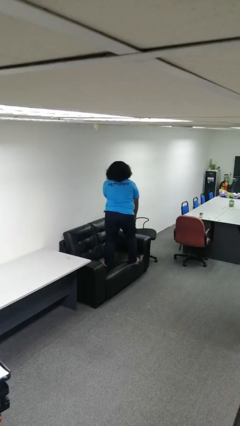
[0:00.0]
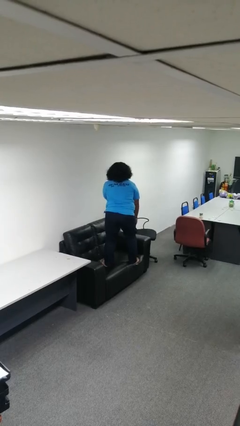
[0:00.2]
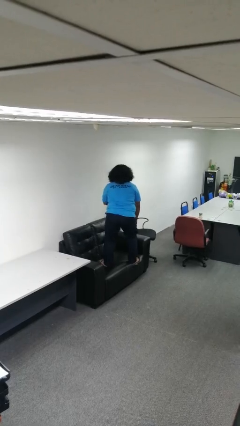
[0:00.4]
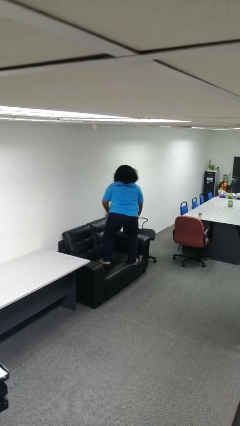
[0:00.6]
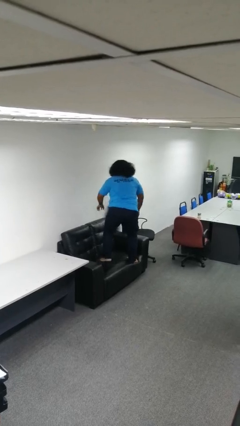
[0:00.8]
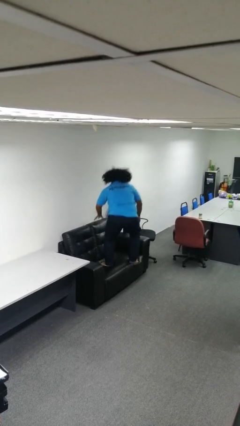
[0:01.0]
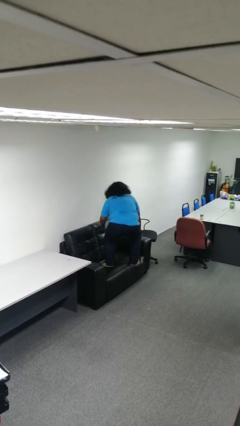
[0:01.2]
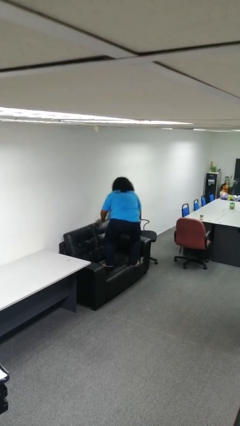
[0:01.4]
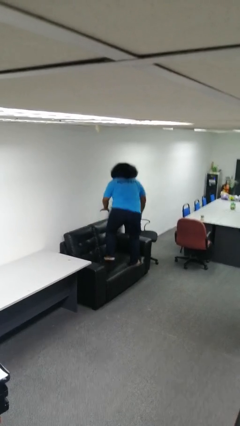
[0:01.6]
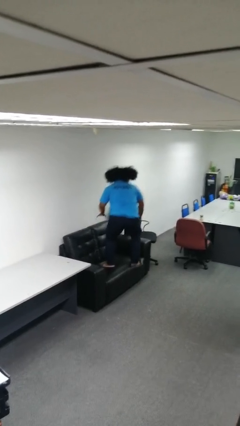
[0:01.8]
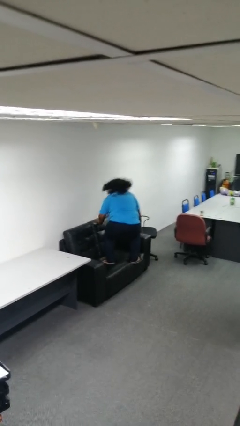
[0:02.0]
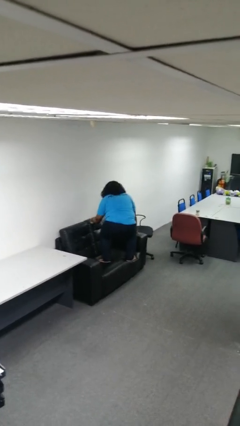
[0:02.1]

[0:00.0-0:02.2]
person jumps on couch

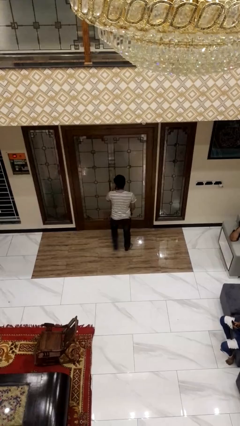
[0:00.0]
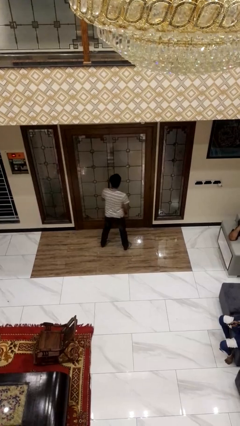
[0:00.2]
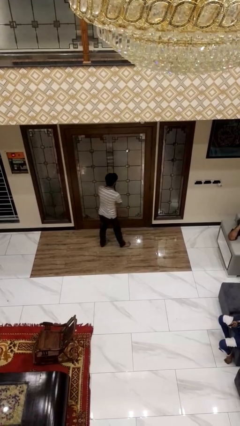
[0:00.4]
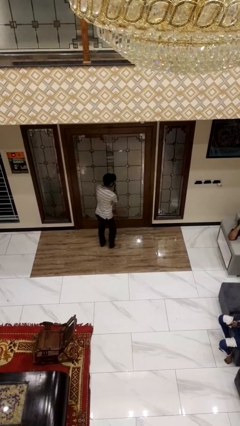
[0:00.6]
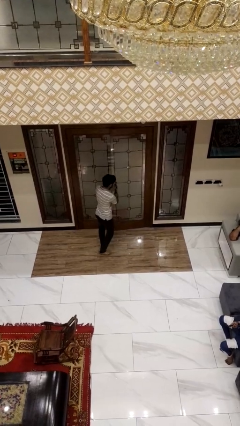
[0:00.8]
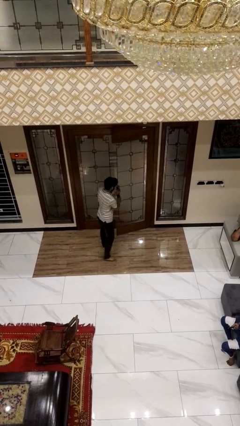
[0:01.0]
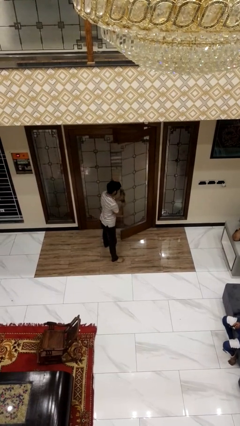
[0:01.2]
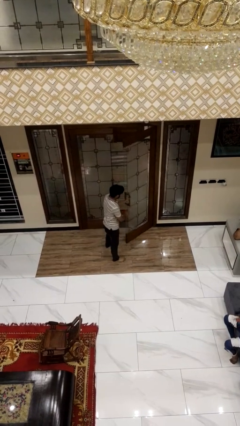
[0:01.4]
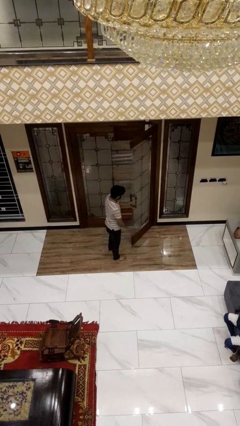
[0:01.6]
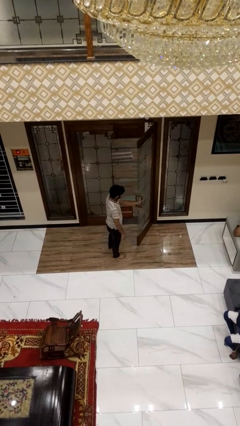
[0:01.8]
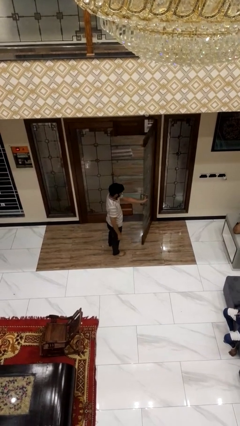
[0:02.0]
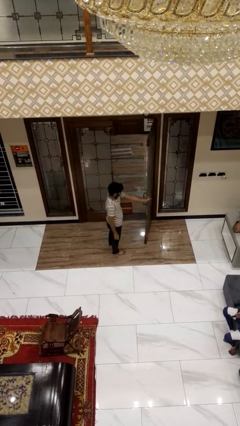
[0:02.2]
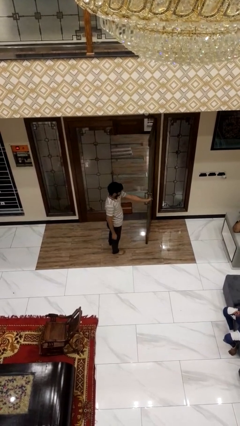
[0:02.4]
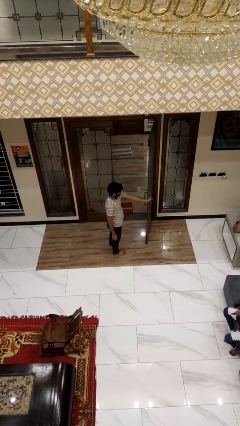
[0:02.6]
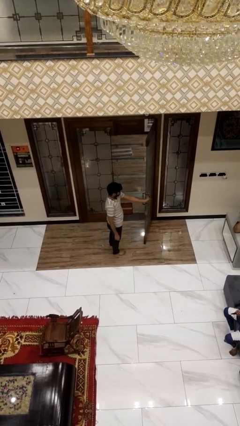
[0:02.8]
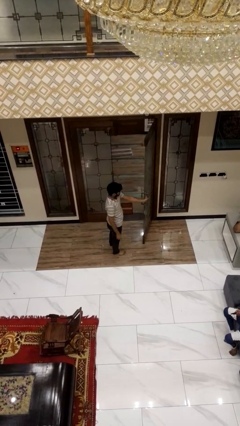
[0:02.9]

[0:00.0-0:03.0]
person opens facility door

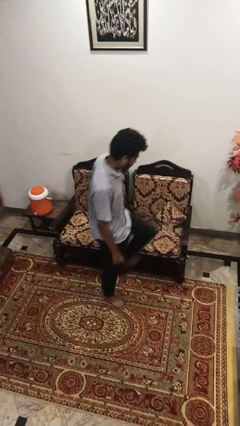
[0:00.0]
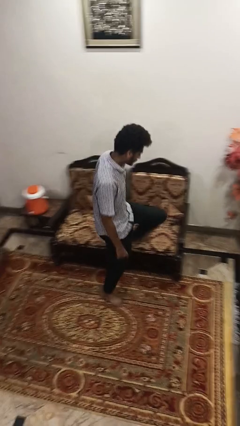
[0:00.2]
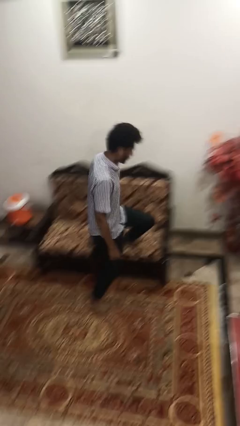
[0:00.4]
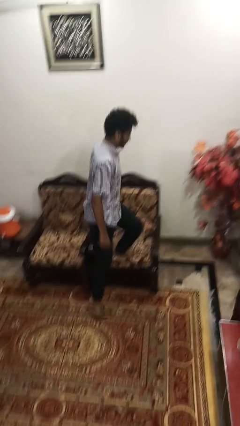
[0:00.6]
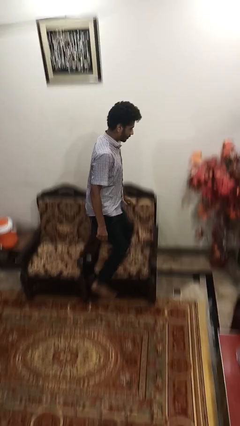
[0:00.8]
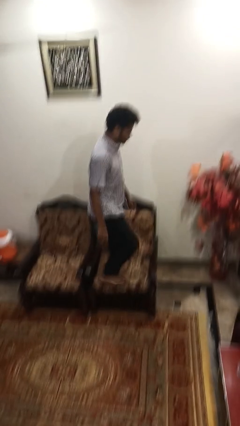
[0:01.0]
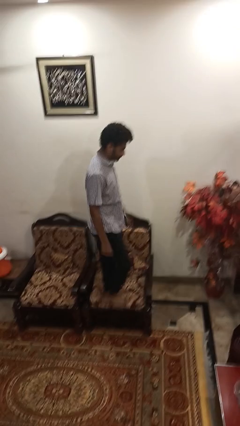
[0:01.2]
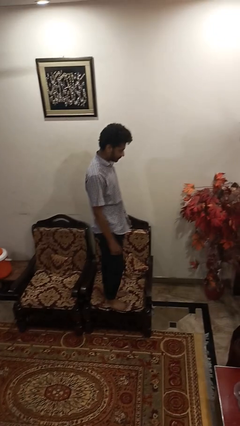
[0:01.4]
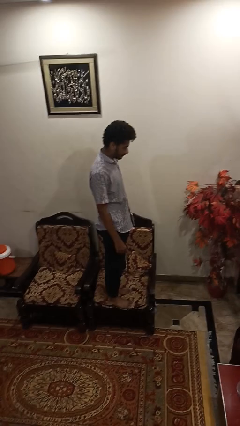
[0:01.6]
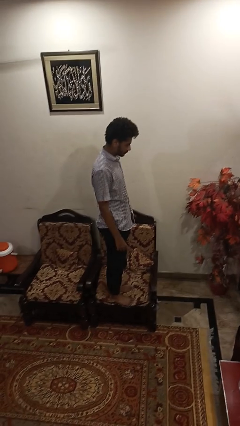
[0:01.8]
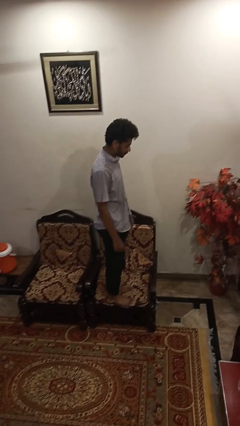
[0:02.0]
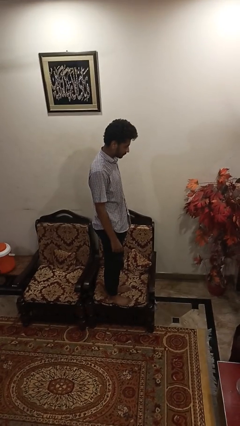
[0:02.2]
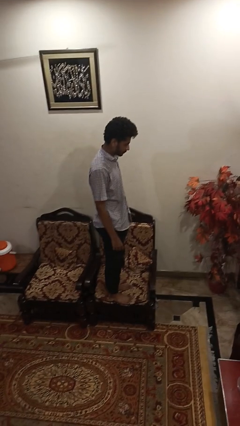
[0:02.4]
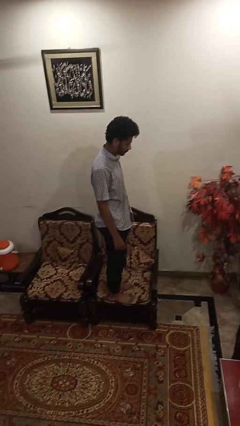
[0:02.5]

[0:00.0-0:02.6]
person climbs on couch

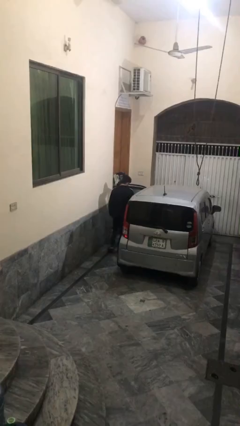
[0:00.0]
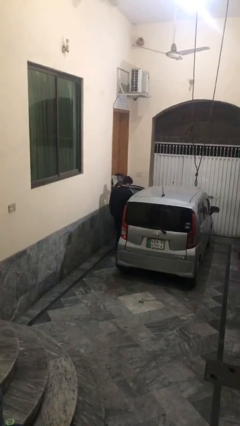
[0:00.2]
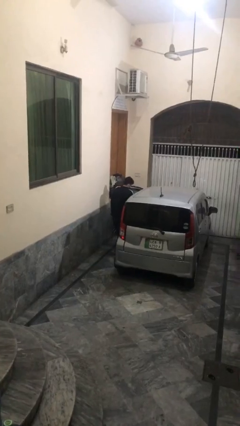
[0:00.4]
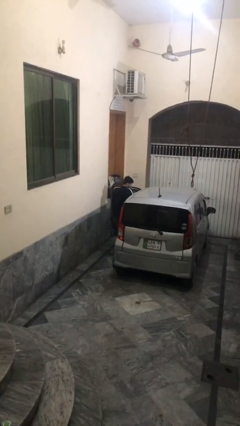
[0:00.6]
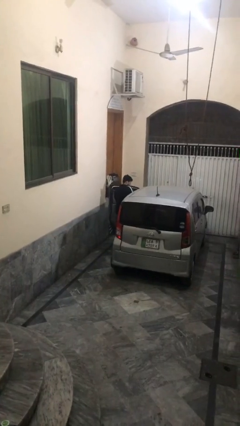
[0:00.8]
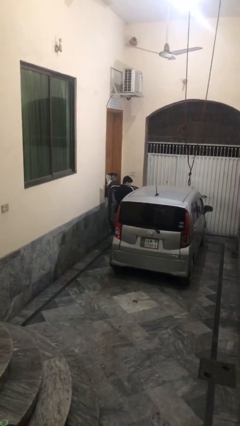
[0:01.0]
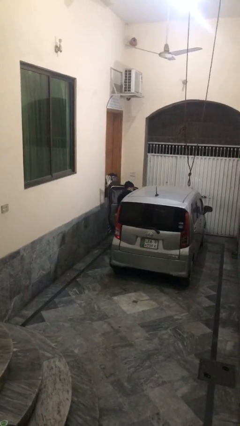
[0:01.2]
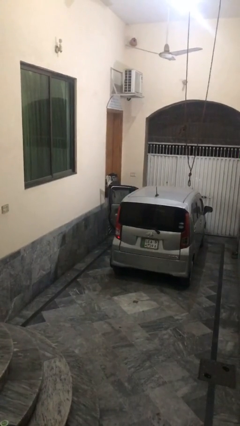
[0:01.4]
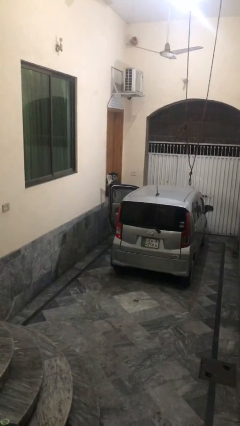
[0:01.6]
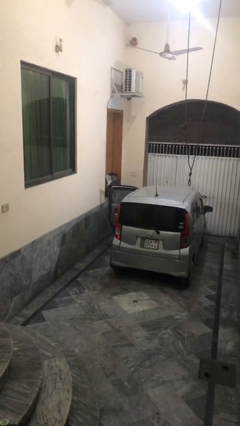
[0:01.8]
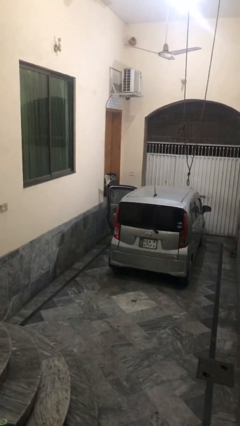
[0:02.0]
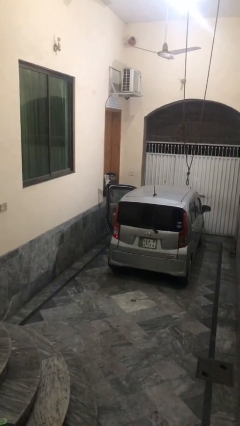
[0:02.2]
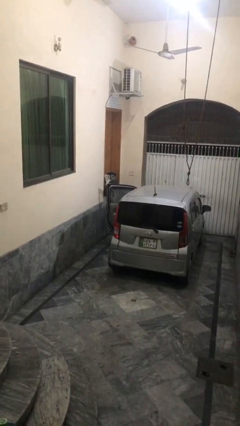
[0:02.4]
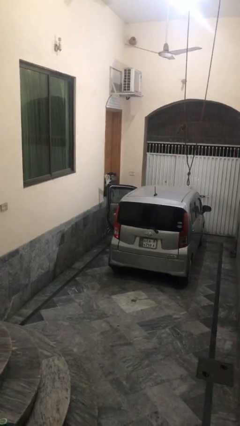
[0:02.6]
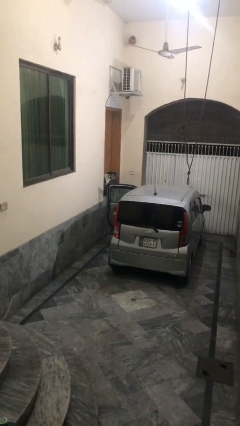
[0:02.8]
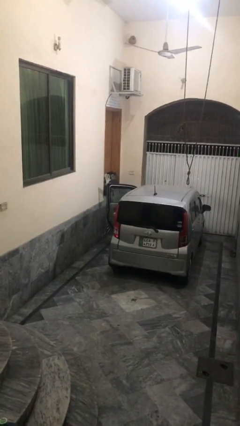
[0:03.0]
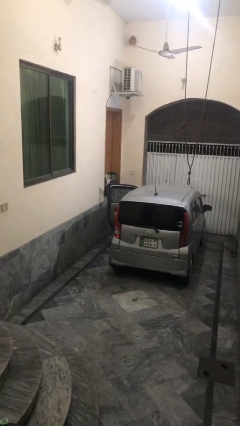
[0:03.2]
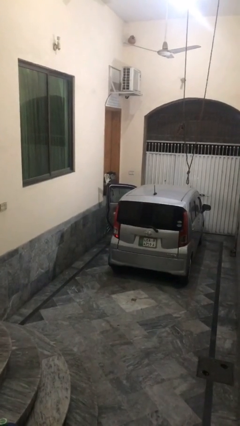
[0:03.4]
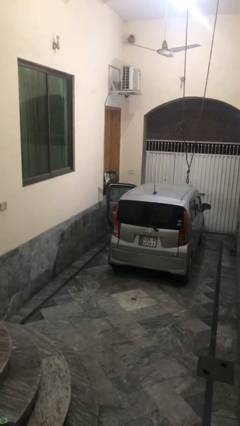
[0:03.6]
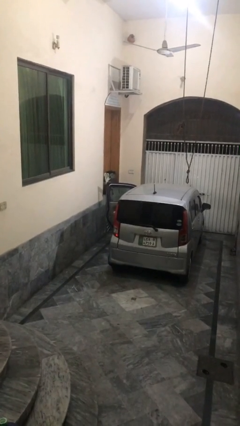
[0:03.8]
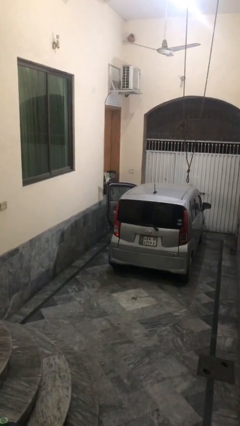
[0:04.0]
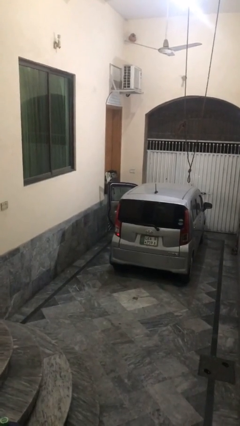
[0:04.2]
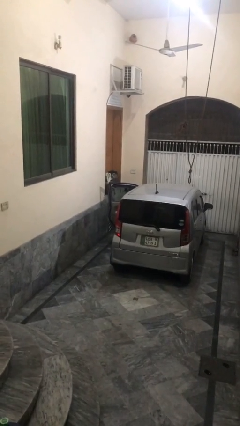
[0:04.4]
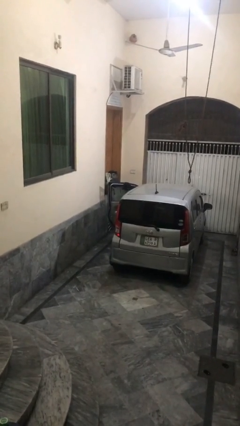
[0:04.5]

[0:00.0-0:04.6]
person enters car

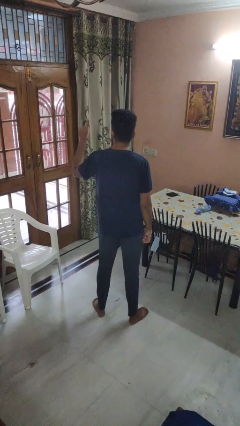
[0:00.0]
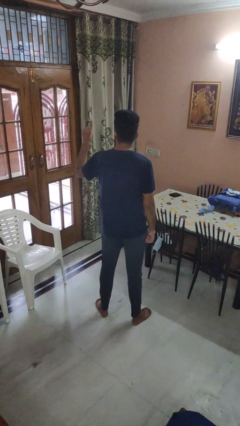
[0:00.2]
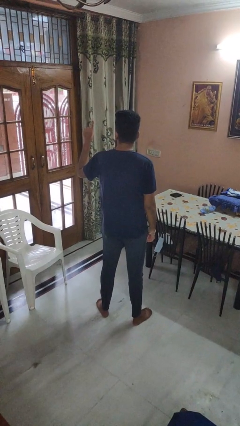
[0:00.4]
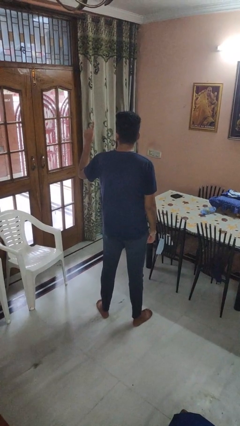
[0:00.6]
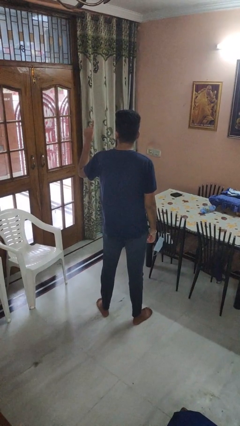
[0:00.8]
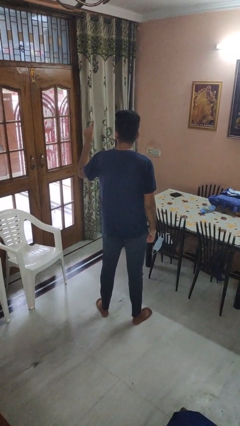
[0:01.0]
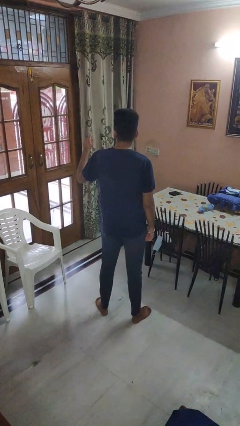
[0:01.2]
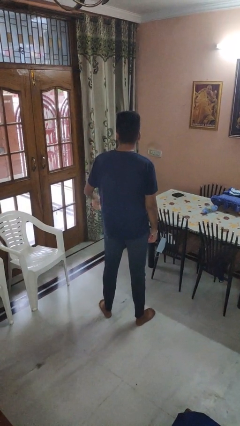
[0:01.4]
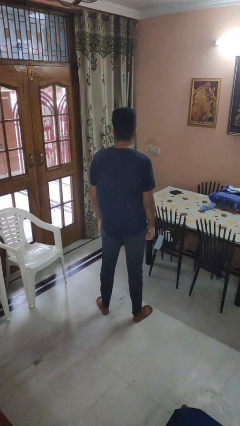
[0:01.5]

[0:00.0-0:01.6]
person gestures number one

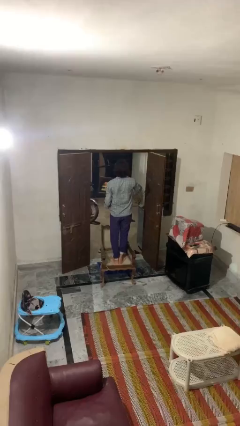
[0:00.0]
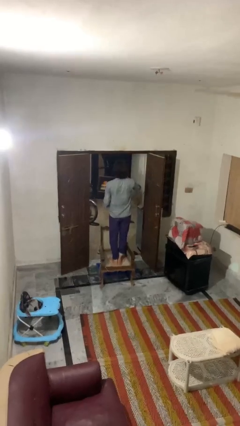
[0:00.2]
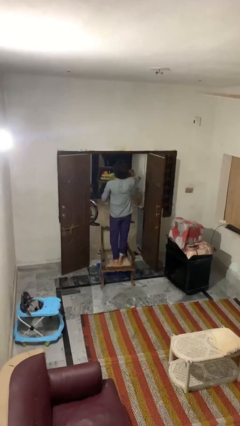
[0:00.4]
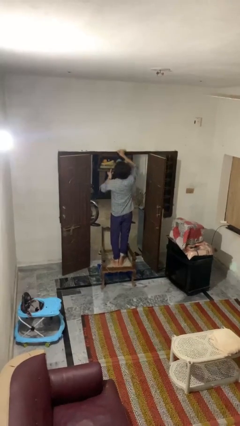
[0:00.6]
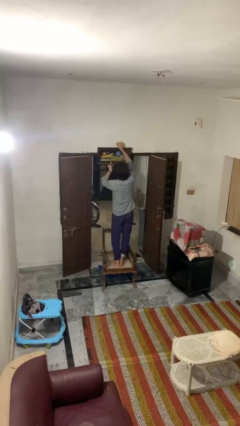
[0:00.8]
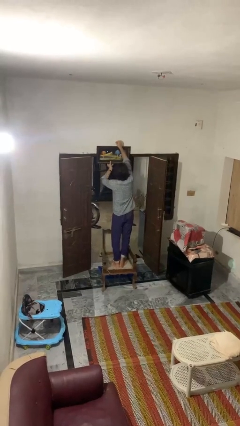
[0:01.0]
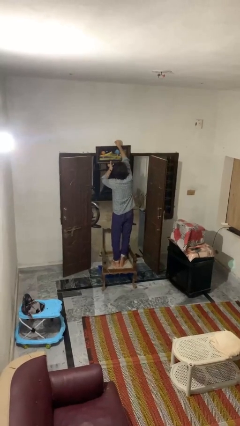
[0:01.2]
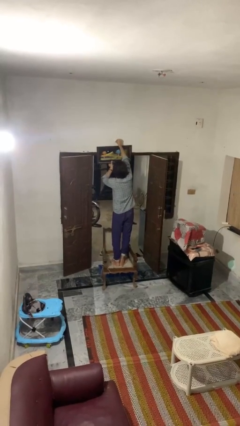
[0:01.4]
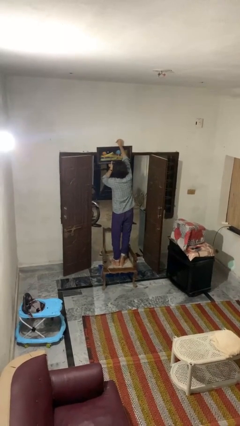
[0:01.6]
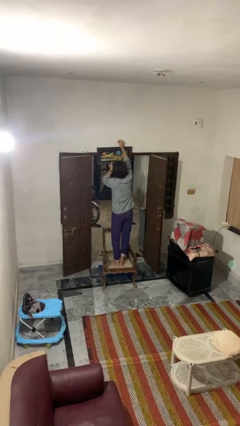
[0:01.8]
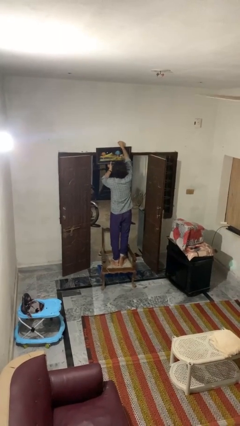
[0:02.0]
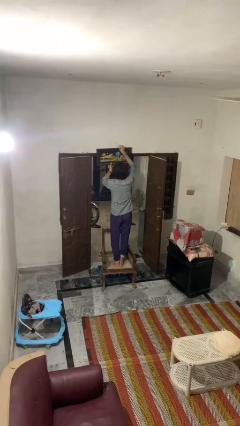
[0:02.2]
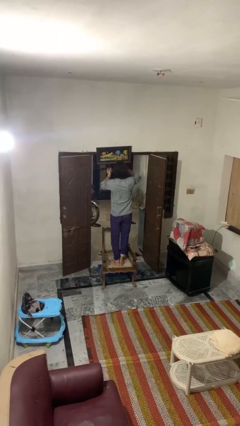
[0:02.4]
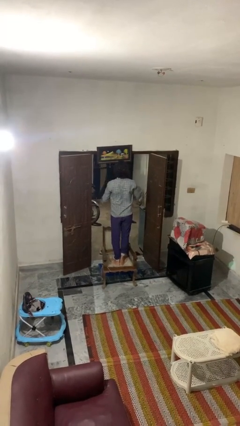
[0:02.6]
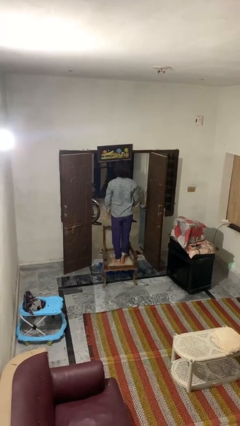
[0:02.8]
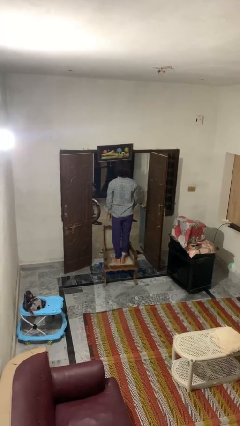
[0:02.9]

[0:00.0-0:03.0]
person puts up picture frame

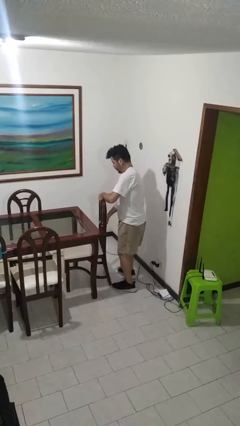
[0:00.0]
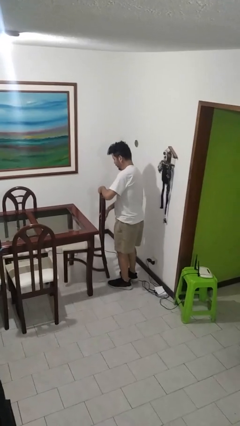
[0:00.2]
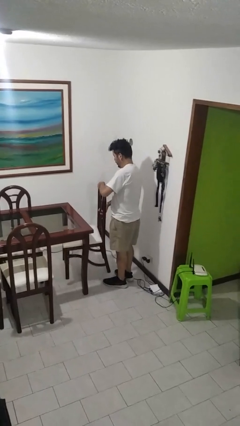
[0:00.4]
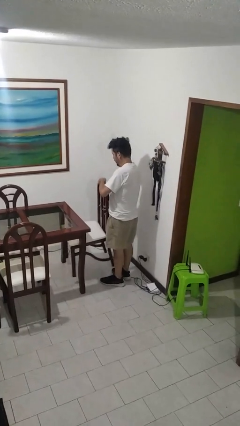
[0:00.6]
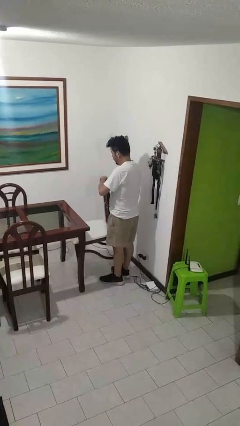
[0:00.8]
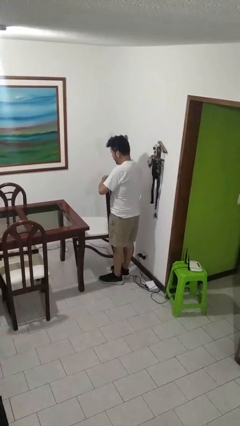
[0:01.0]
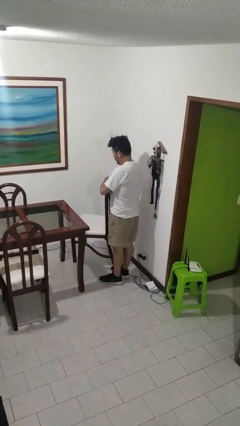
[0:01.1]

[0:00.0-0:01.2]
person pulls out chair
